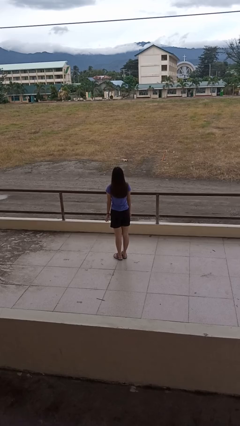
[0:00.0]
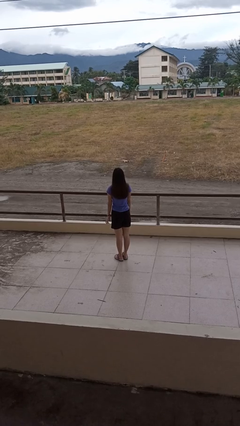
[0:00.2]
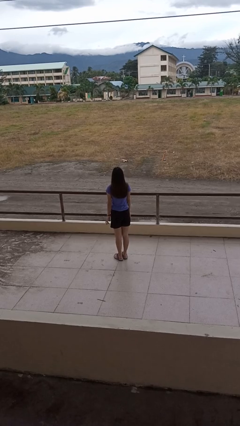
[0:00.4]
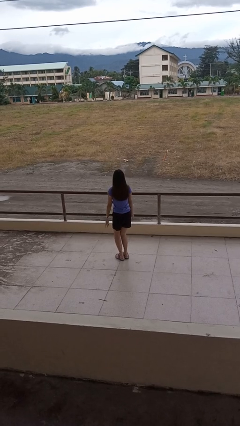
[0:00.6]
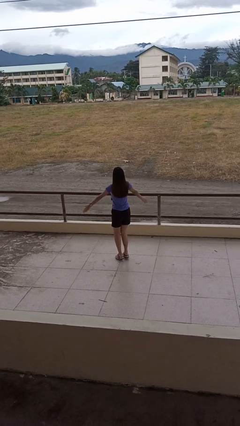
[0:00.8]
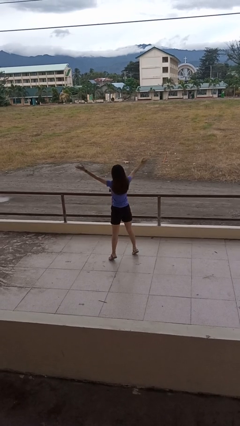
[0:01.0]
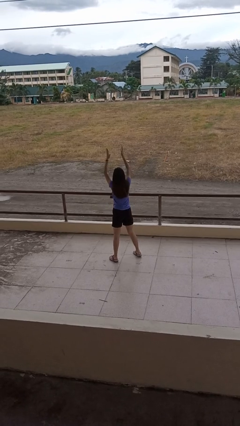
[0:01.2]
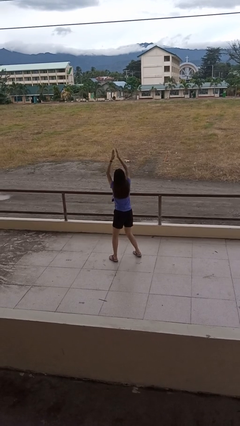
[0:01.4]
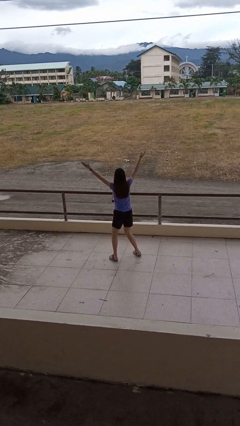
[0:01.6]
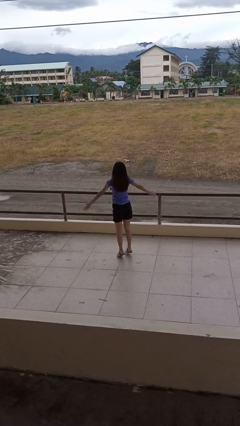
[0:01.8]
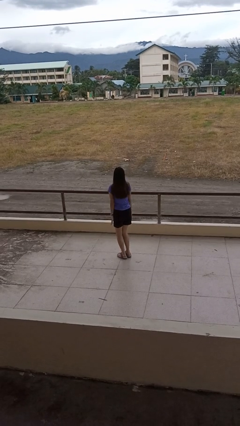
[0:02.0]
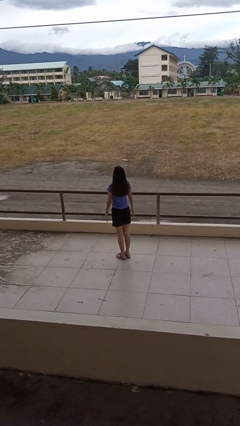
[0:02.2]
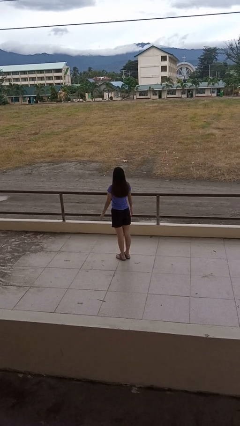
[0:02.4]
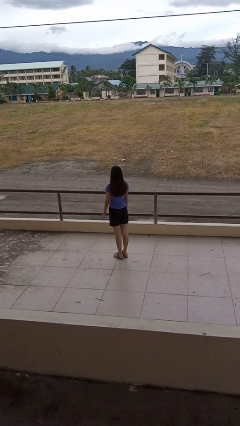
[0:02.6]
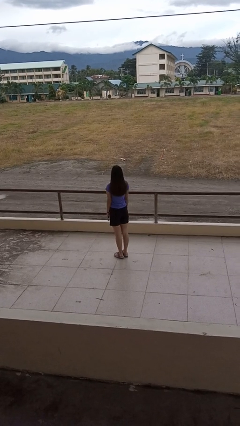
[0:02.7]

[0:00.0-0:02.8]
person exercises with jumping jacks

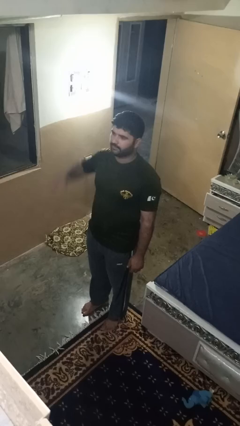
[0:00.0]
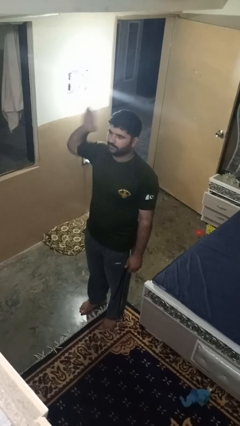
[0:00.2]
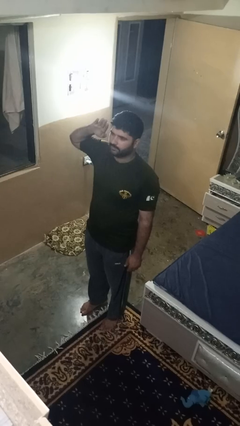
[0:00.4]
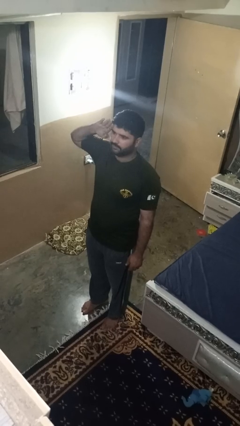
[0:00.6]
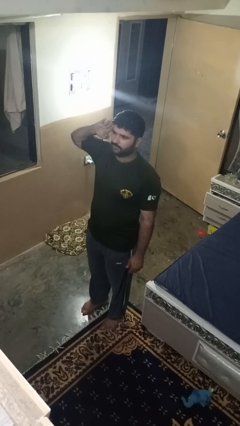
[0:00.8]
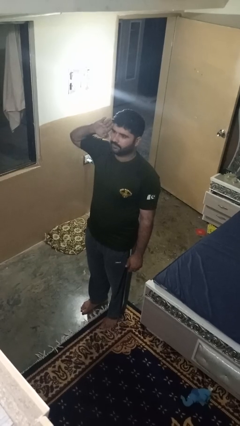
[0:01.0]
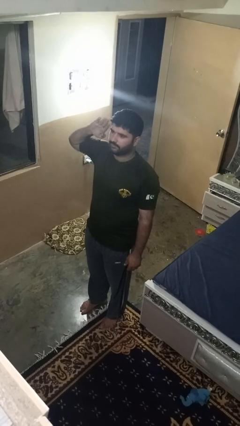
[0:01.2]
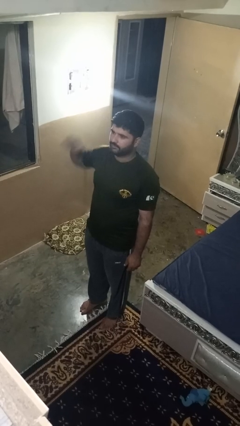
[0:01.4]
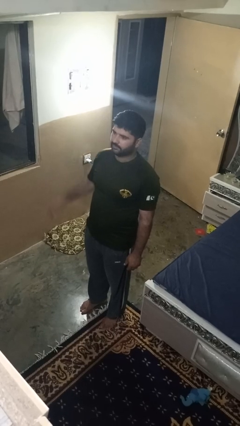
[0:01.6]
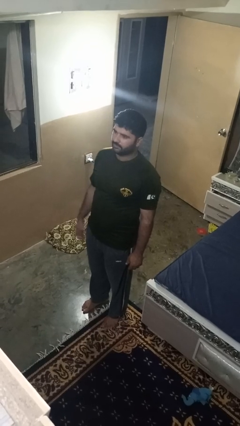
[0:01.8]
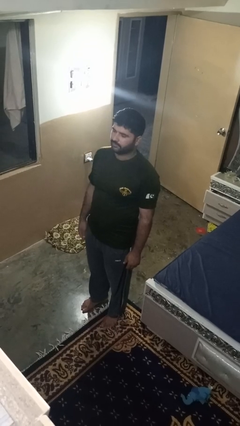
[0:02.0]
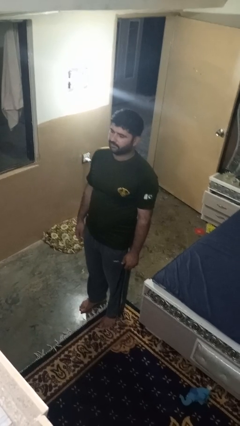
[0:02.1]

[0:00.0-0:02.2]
person salutes

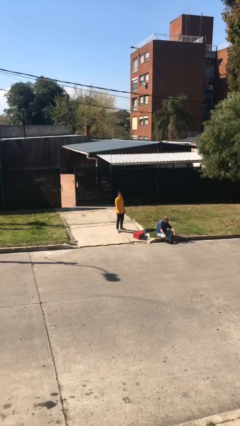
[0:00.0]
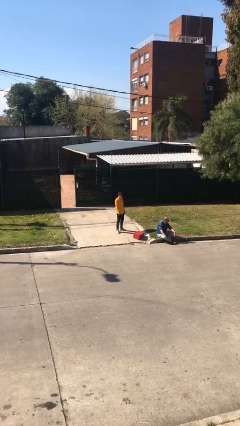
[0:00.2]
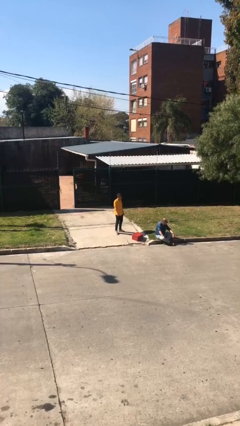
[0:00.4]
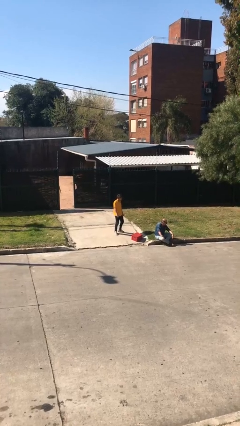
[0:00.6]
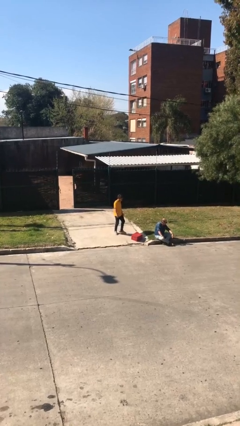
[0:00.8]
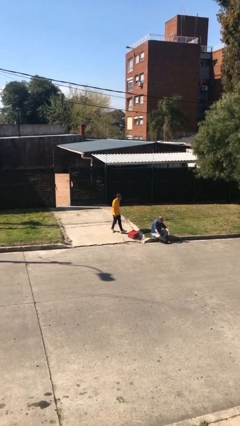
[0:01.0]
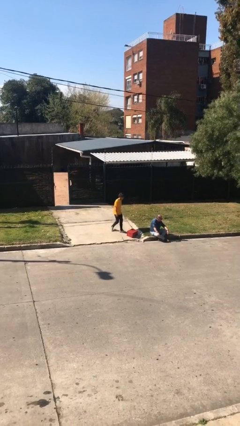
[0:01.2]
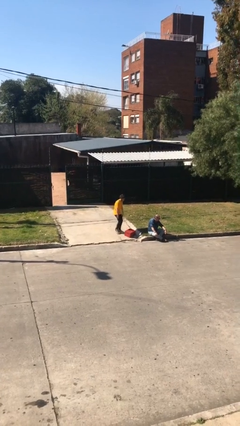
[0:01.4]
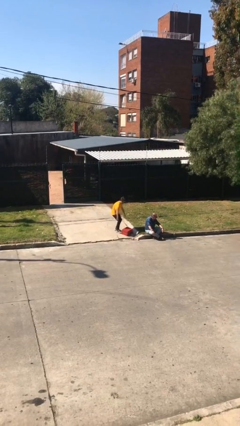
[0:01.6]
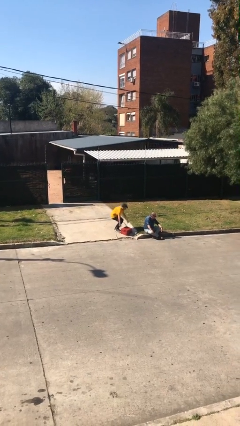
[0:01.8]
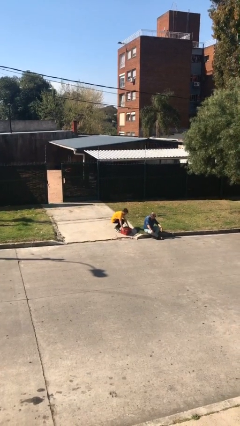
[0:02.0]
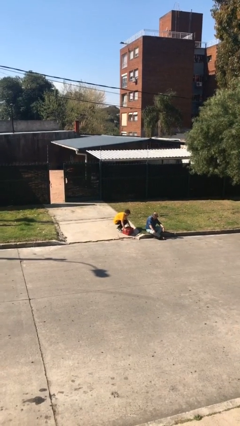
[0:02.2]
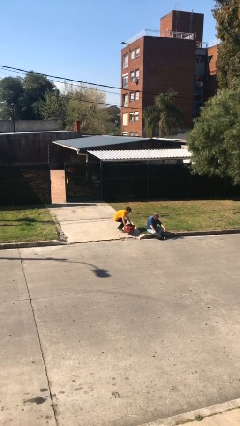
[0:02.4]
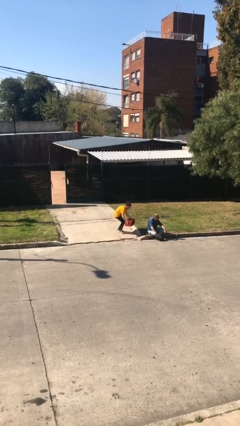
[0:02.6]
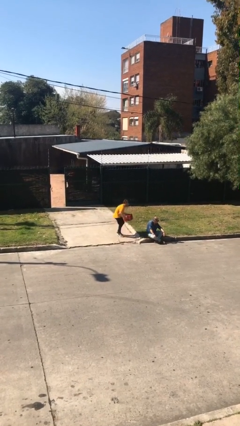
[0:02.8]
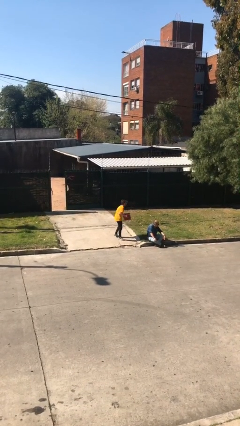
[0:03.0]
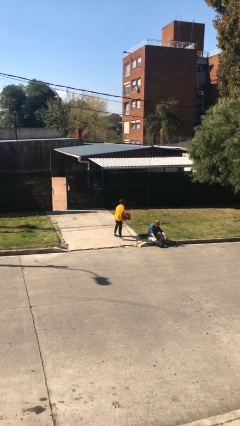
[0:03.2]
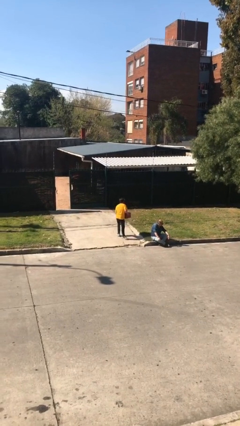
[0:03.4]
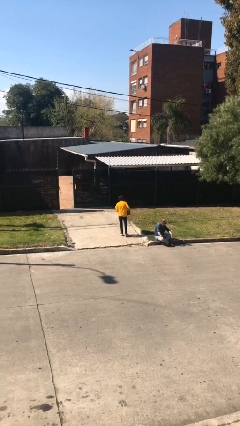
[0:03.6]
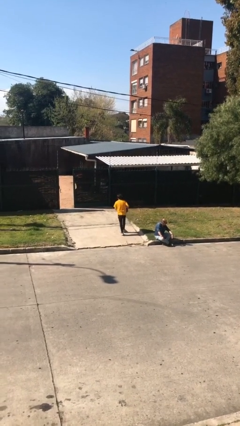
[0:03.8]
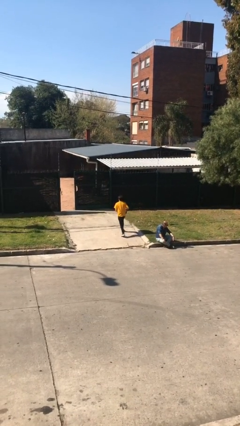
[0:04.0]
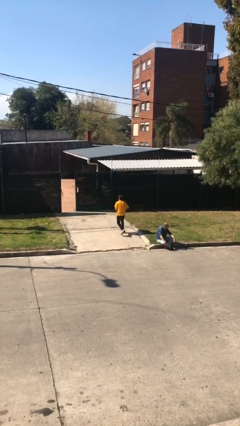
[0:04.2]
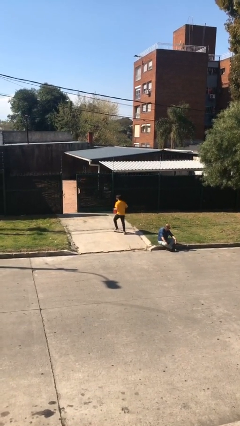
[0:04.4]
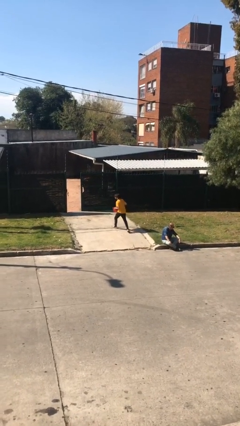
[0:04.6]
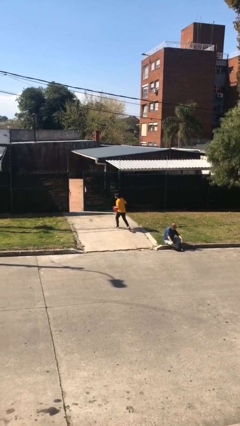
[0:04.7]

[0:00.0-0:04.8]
person steals object from person

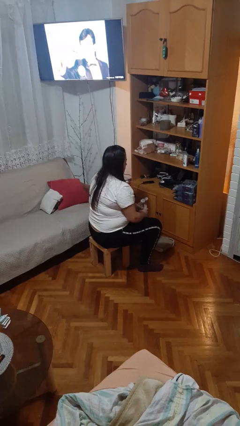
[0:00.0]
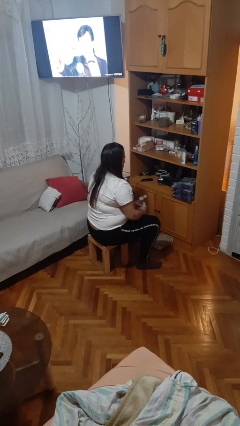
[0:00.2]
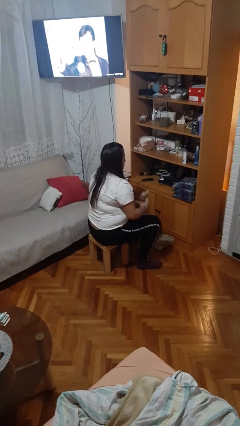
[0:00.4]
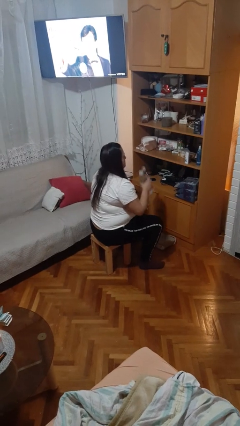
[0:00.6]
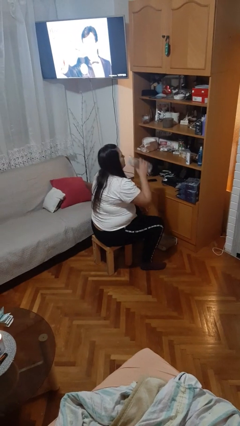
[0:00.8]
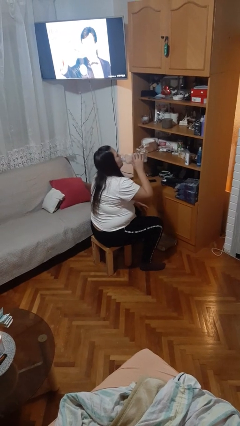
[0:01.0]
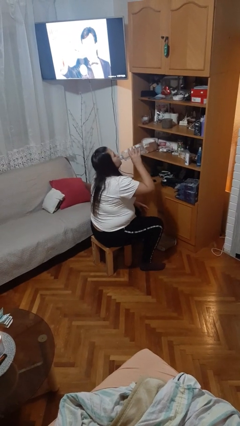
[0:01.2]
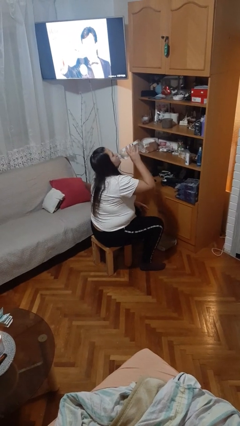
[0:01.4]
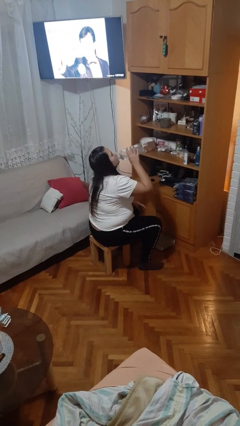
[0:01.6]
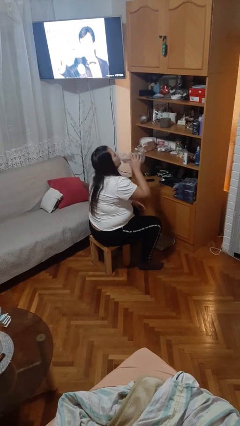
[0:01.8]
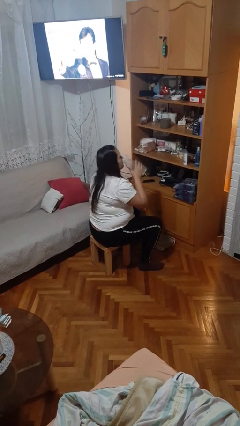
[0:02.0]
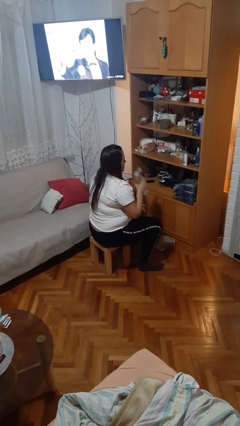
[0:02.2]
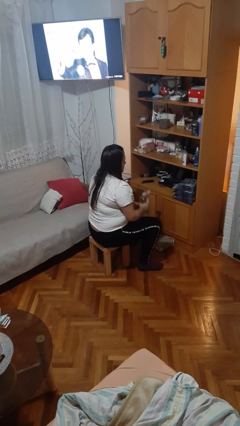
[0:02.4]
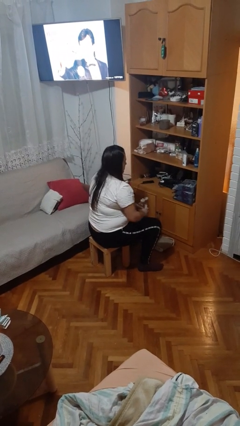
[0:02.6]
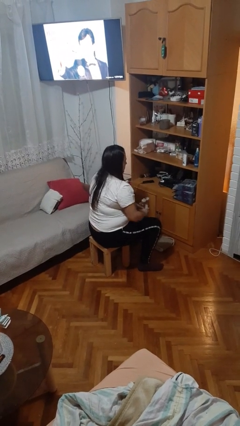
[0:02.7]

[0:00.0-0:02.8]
person drinks from bottle

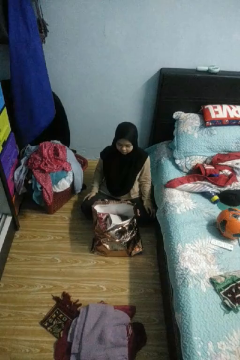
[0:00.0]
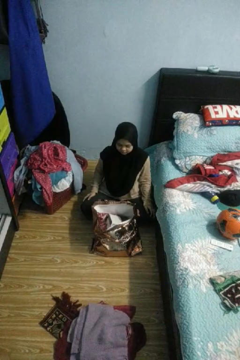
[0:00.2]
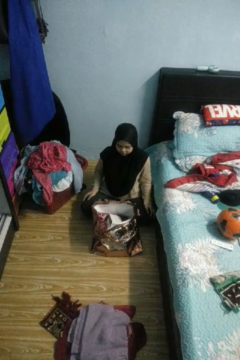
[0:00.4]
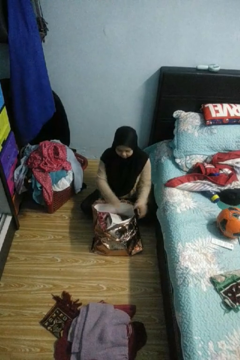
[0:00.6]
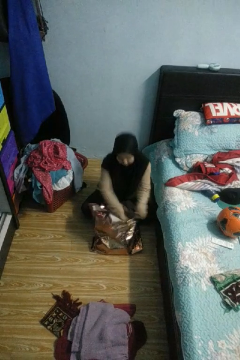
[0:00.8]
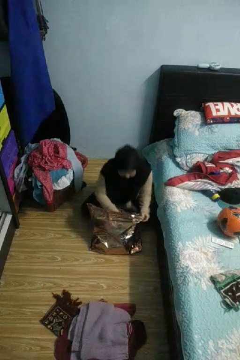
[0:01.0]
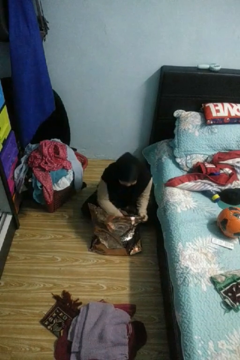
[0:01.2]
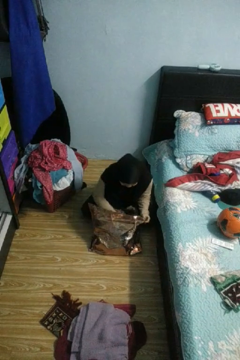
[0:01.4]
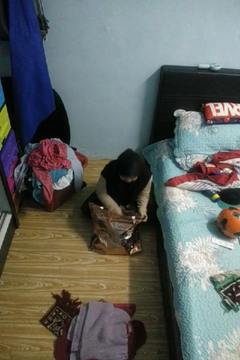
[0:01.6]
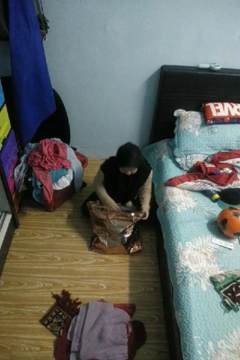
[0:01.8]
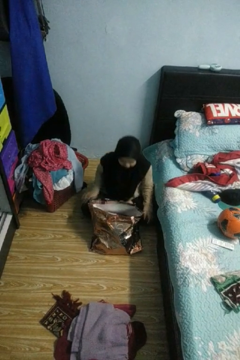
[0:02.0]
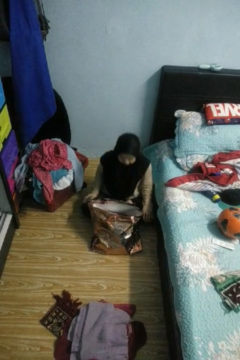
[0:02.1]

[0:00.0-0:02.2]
person searches in bag

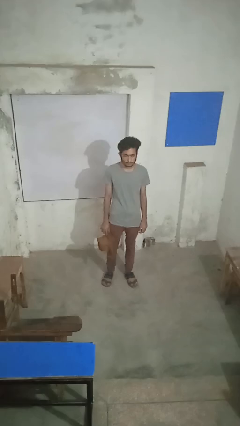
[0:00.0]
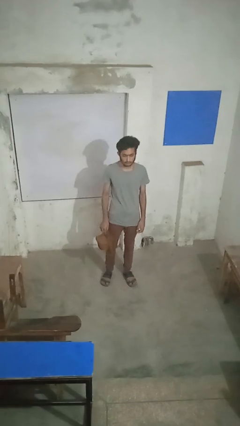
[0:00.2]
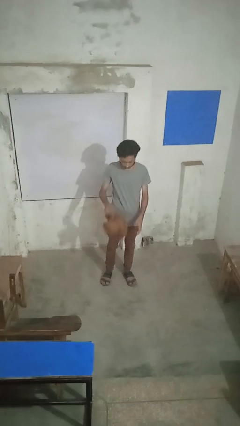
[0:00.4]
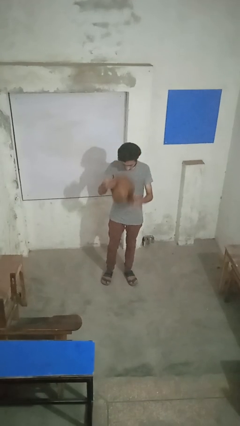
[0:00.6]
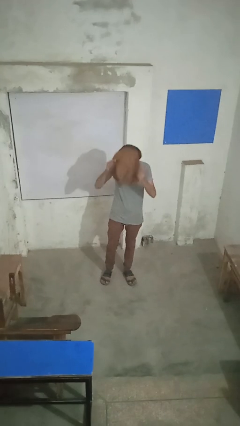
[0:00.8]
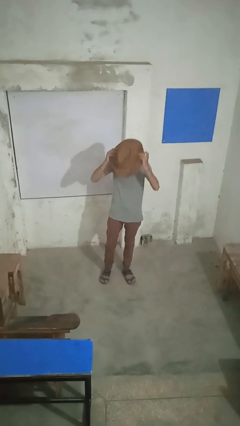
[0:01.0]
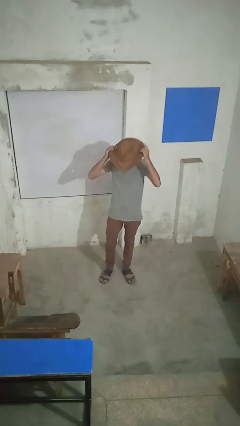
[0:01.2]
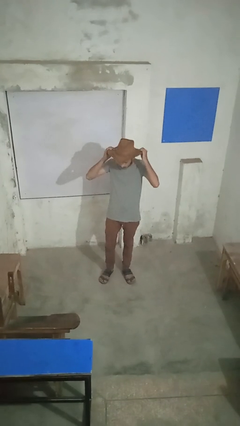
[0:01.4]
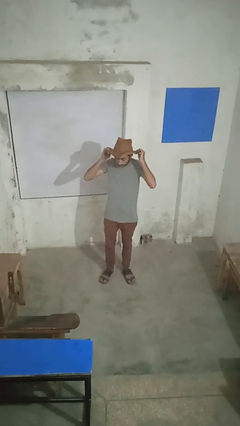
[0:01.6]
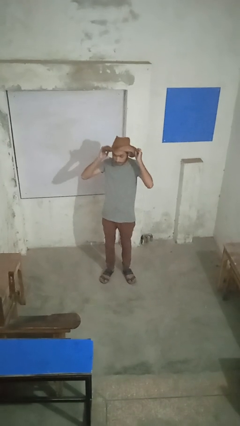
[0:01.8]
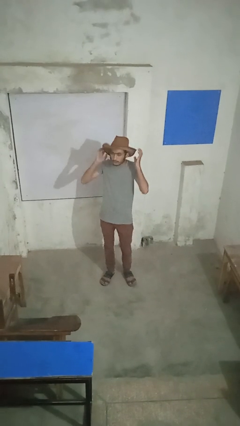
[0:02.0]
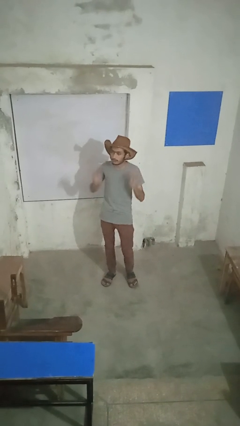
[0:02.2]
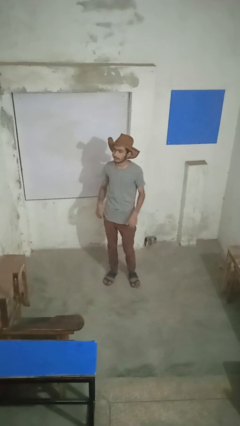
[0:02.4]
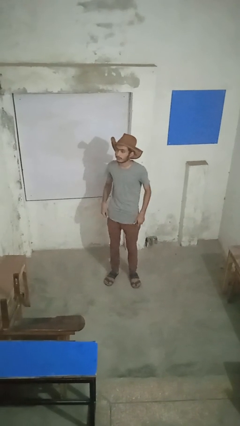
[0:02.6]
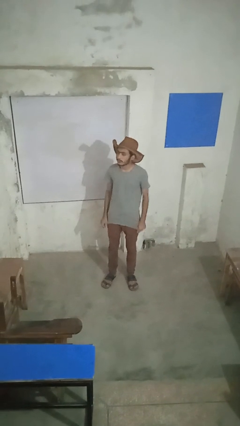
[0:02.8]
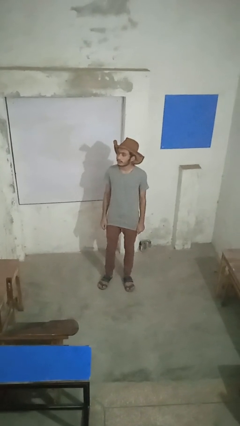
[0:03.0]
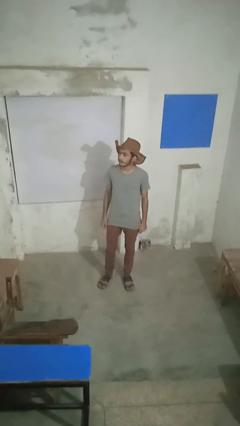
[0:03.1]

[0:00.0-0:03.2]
person puts on hat
